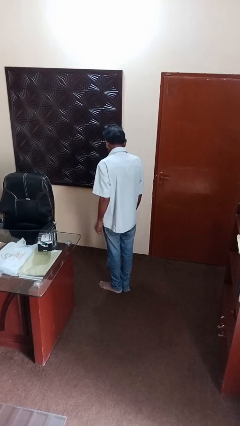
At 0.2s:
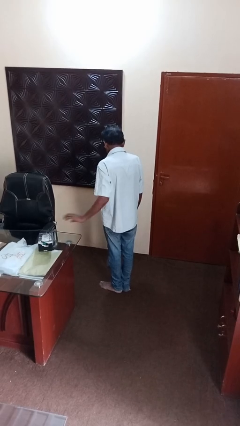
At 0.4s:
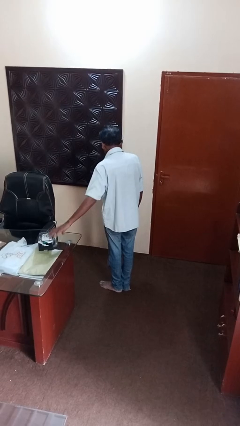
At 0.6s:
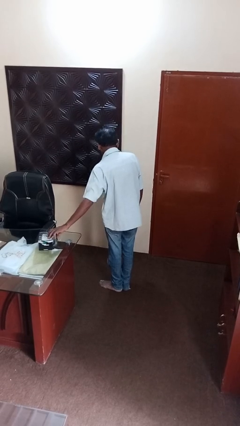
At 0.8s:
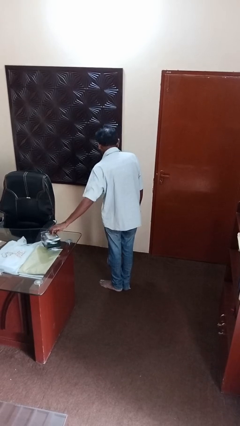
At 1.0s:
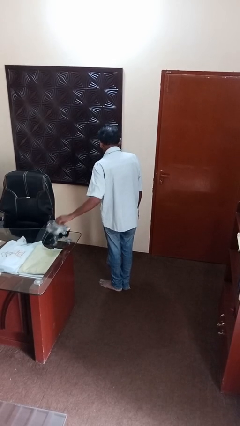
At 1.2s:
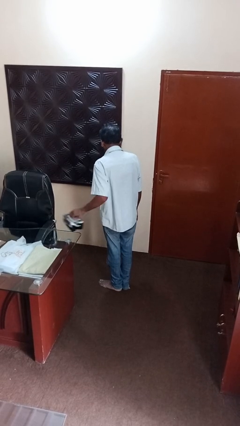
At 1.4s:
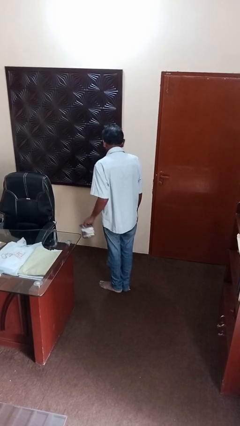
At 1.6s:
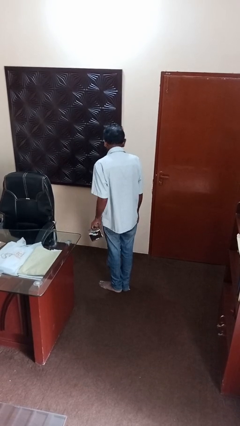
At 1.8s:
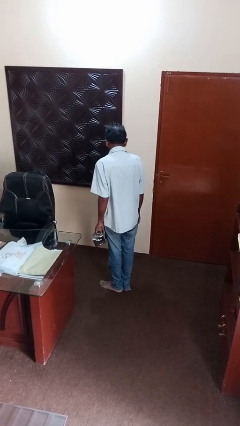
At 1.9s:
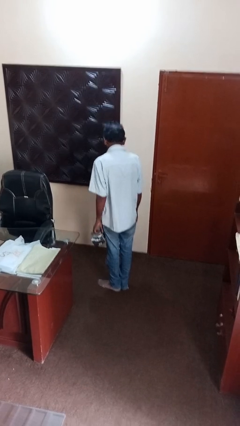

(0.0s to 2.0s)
person picks up object from table

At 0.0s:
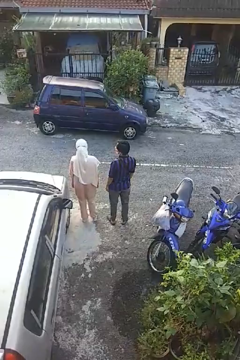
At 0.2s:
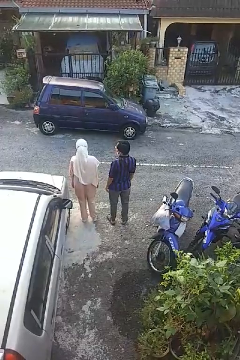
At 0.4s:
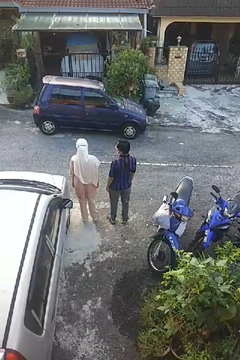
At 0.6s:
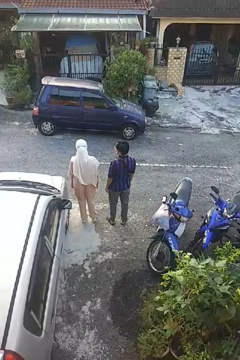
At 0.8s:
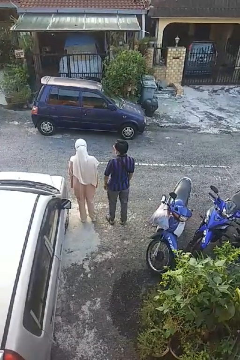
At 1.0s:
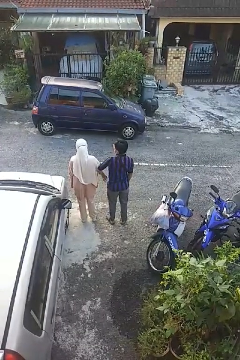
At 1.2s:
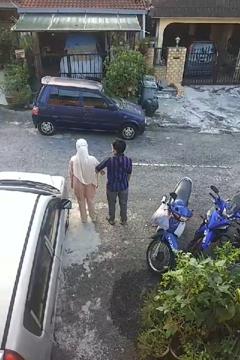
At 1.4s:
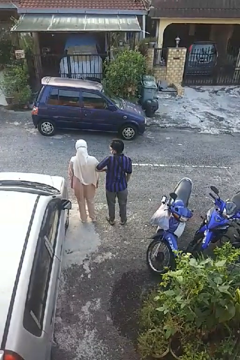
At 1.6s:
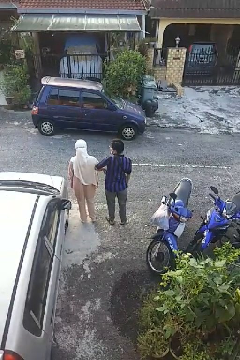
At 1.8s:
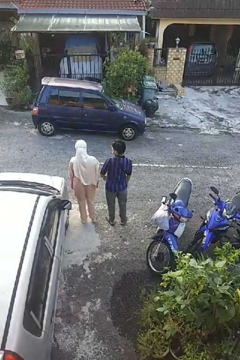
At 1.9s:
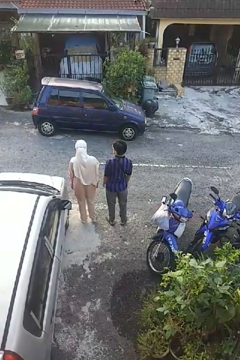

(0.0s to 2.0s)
person nudges person with elbow

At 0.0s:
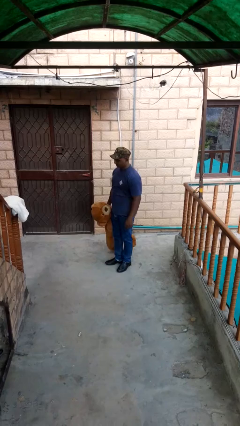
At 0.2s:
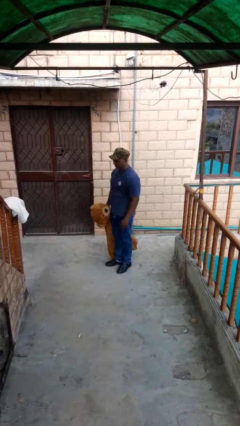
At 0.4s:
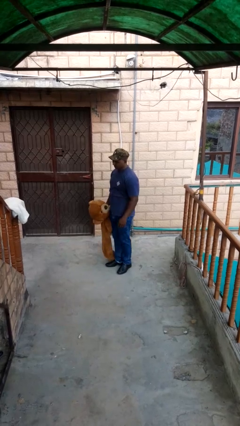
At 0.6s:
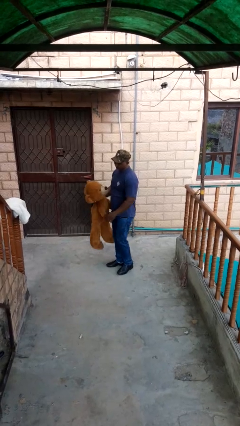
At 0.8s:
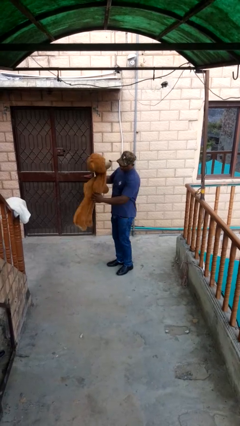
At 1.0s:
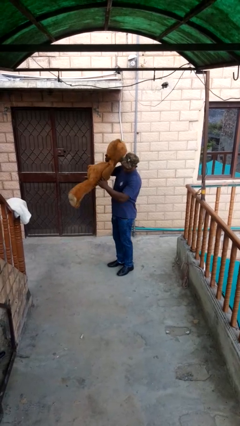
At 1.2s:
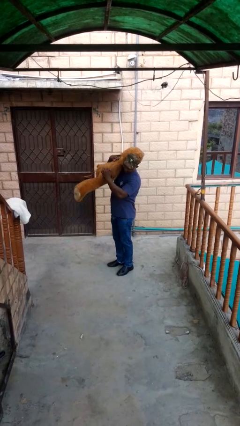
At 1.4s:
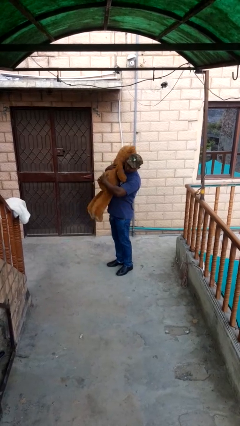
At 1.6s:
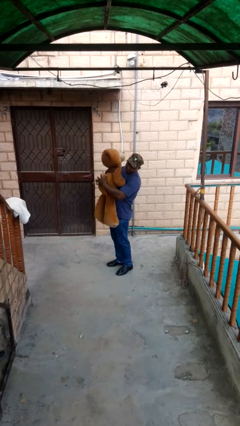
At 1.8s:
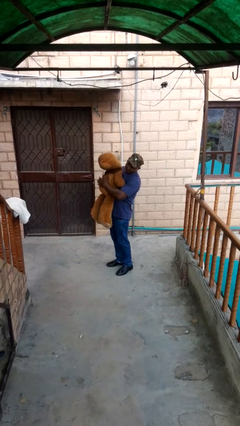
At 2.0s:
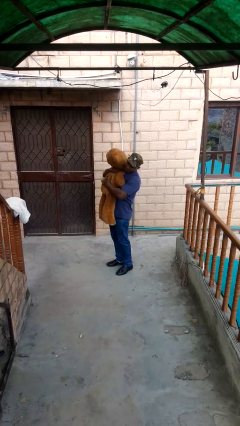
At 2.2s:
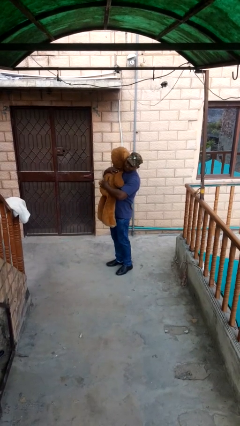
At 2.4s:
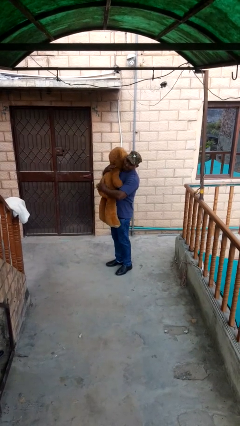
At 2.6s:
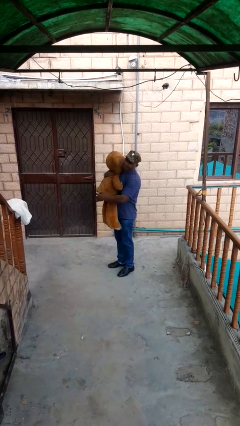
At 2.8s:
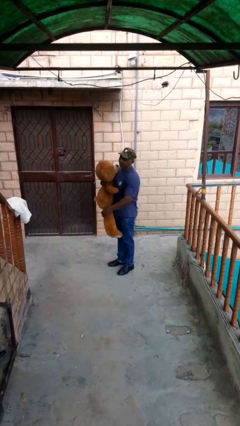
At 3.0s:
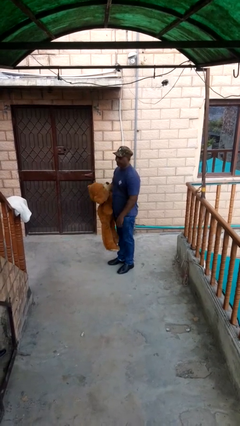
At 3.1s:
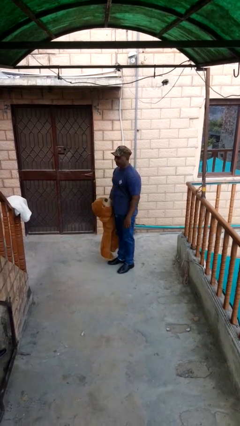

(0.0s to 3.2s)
person hugs stuffed animal

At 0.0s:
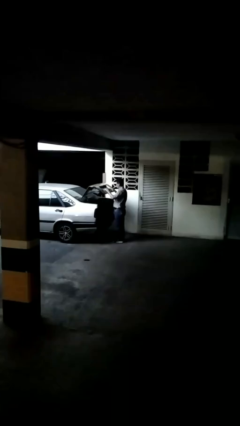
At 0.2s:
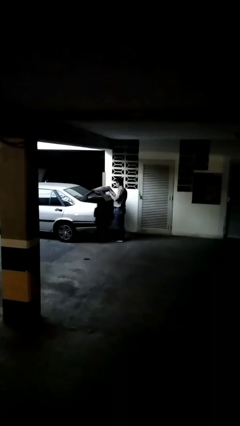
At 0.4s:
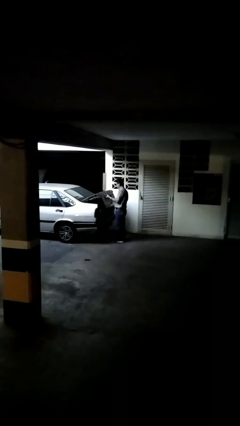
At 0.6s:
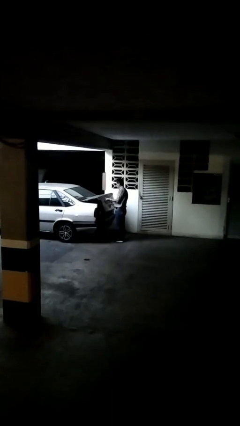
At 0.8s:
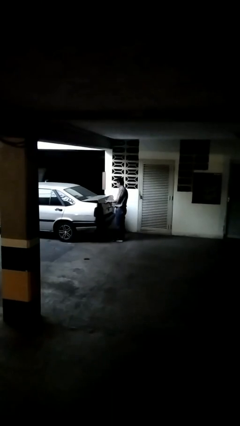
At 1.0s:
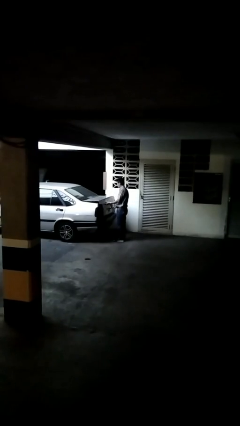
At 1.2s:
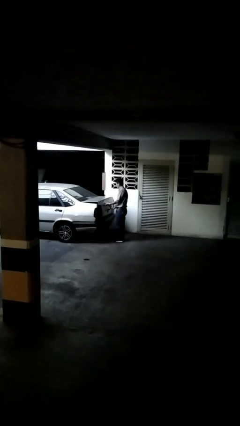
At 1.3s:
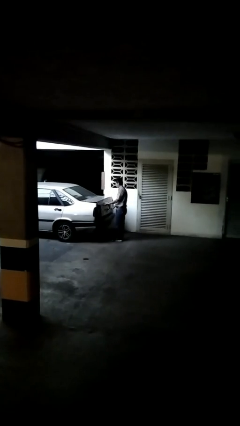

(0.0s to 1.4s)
person closes car trunk

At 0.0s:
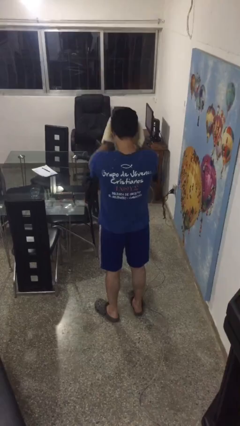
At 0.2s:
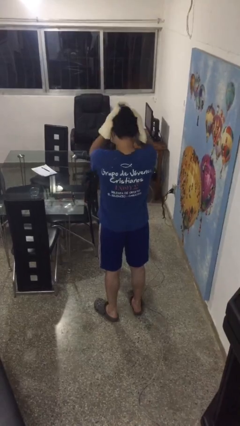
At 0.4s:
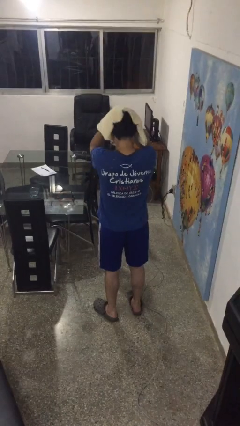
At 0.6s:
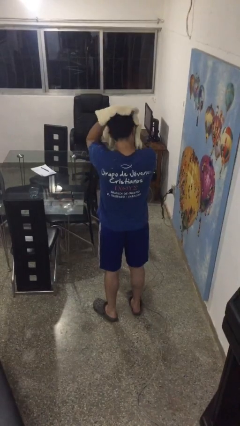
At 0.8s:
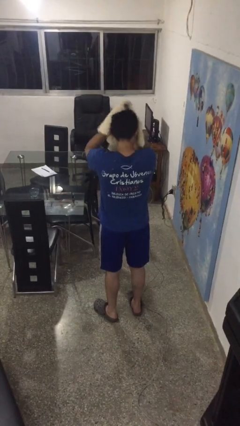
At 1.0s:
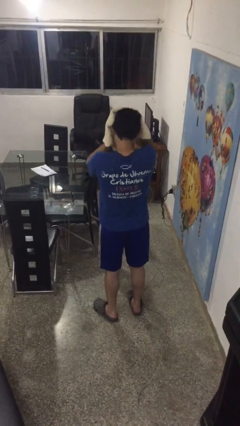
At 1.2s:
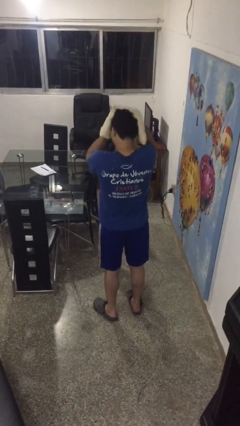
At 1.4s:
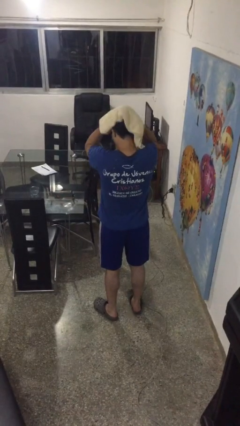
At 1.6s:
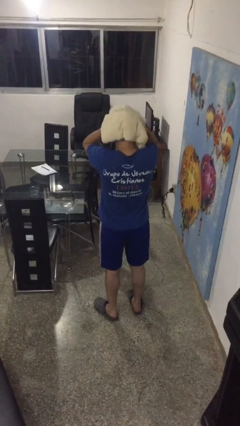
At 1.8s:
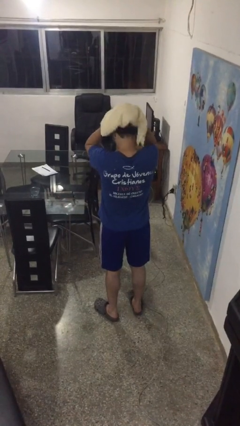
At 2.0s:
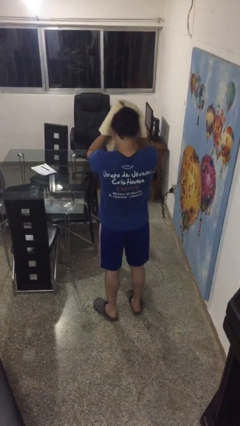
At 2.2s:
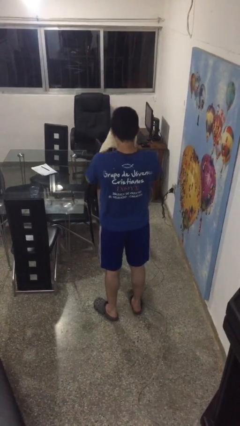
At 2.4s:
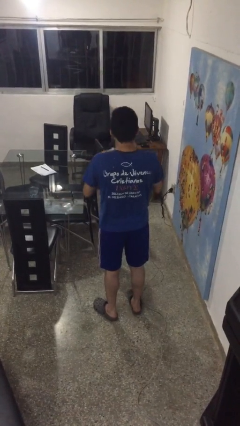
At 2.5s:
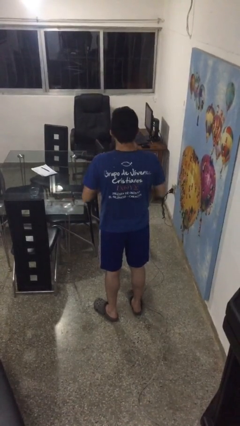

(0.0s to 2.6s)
person dries hair with towel

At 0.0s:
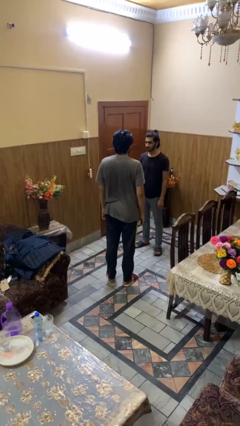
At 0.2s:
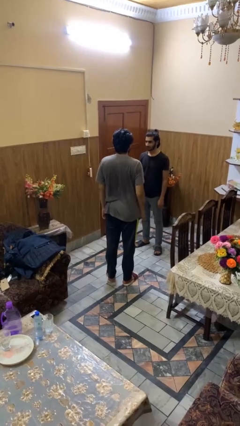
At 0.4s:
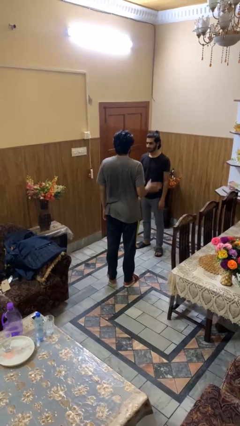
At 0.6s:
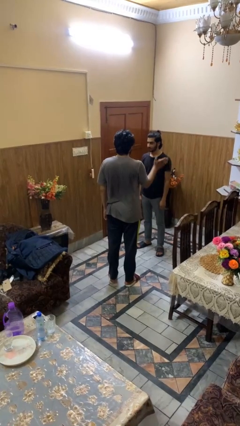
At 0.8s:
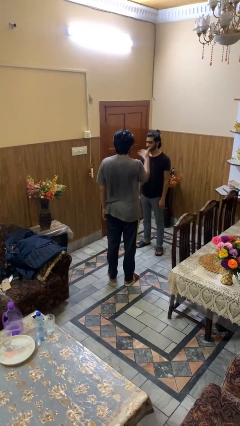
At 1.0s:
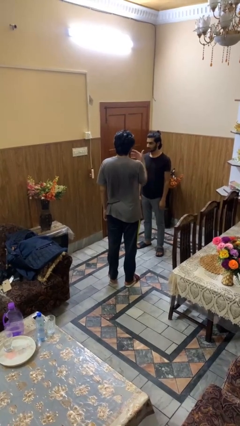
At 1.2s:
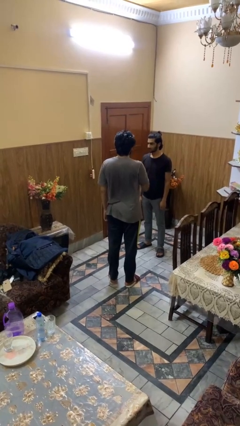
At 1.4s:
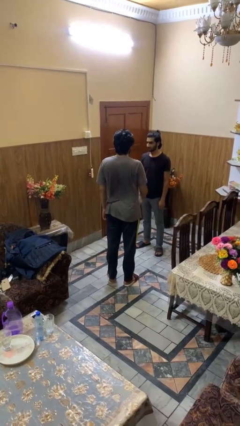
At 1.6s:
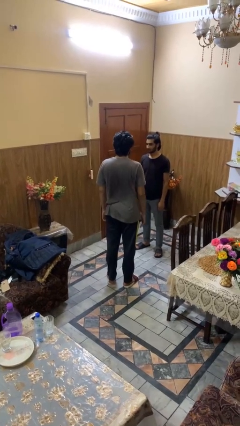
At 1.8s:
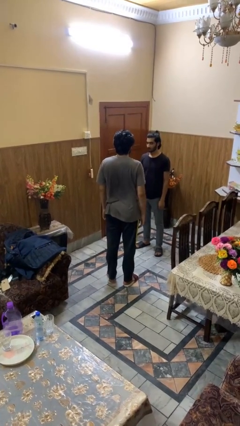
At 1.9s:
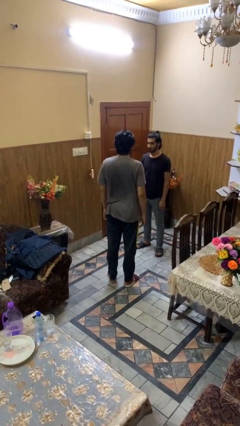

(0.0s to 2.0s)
person shoves person

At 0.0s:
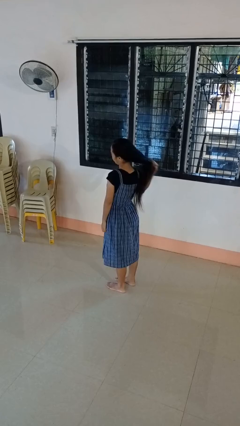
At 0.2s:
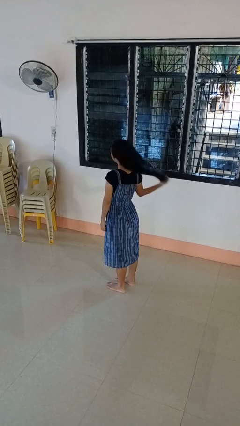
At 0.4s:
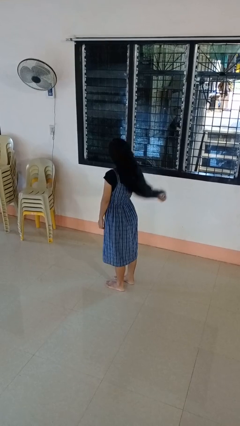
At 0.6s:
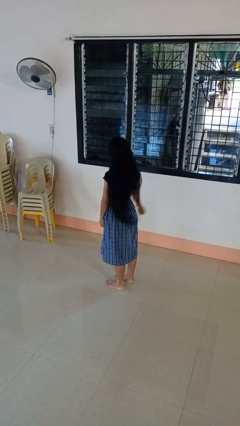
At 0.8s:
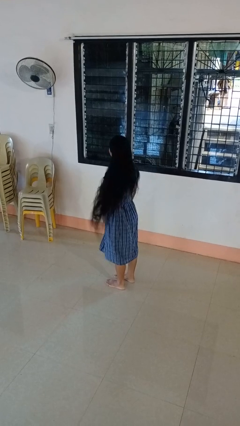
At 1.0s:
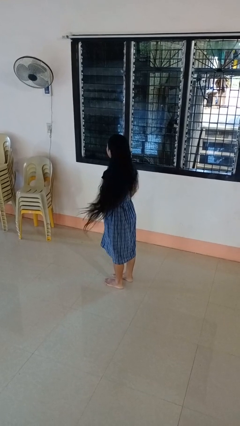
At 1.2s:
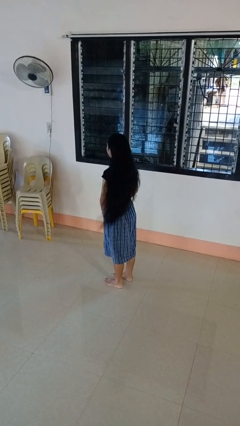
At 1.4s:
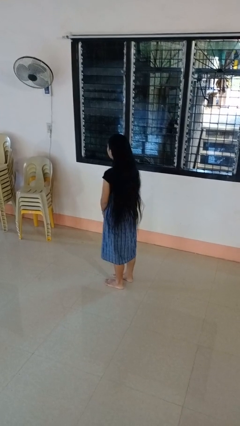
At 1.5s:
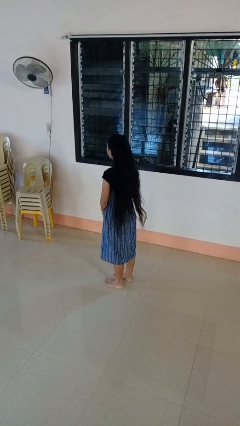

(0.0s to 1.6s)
person takes off hairtie

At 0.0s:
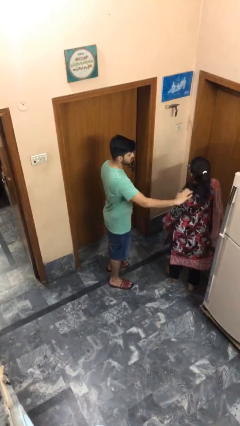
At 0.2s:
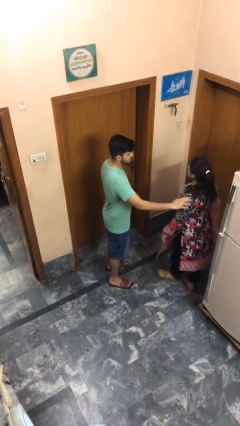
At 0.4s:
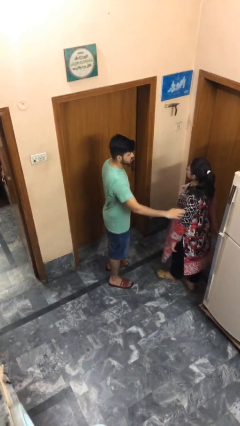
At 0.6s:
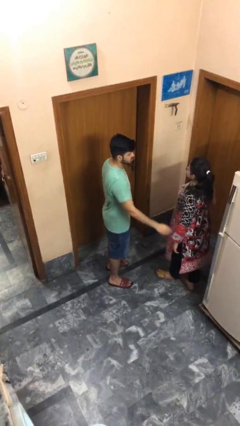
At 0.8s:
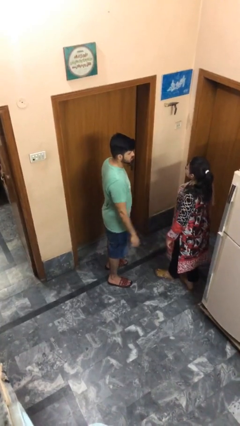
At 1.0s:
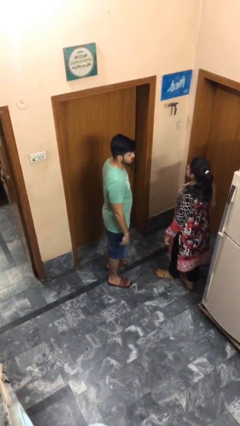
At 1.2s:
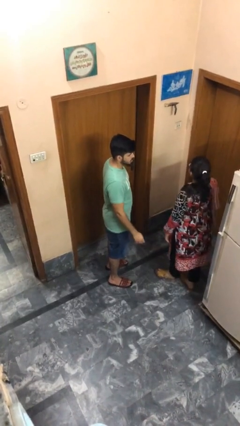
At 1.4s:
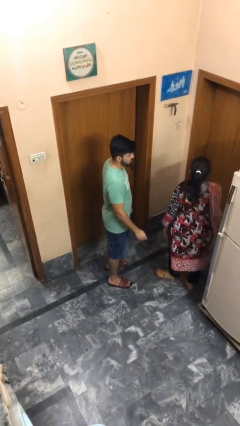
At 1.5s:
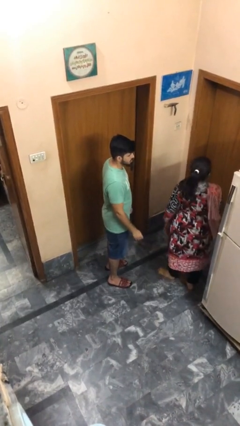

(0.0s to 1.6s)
person spins person around

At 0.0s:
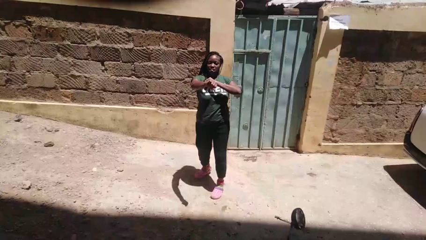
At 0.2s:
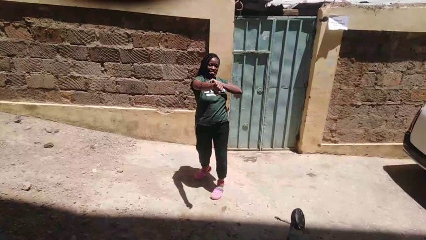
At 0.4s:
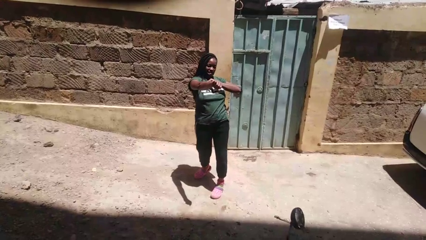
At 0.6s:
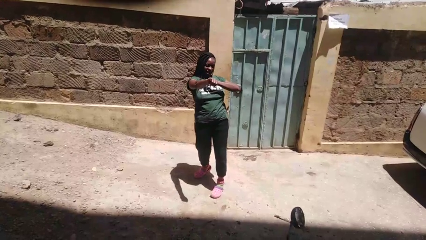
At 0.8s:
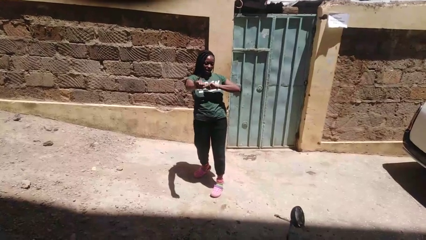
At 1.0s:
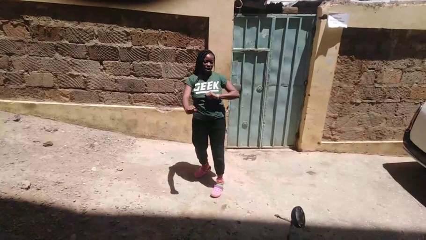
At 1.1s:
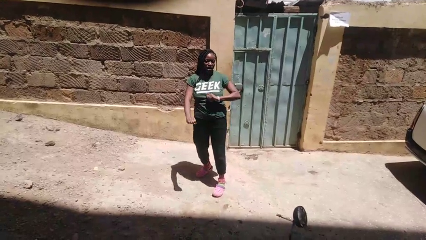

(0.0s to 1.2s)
person punches
